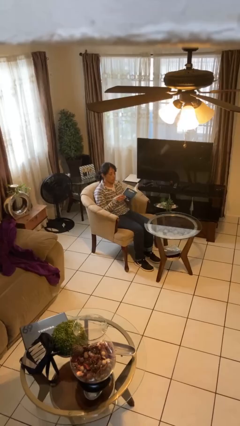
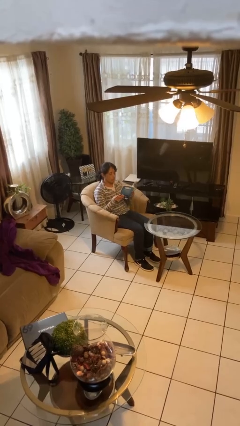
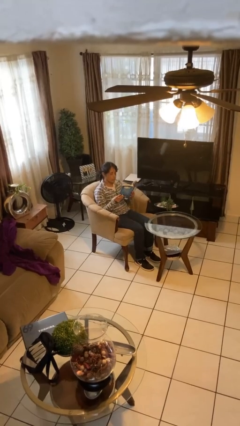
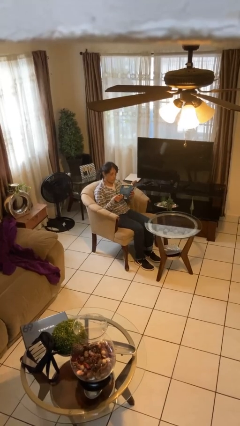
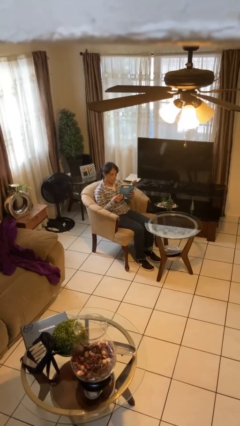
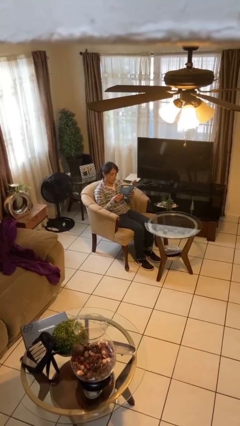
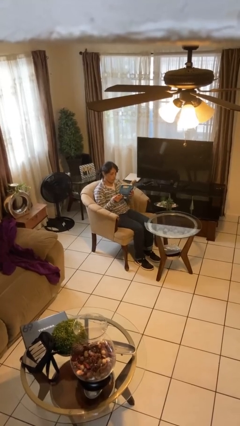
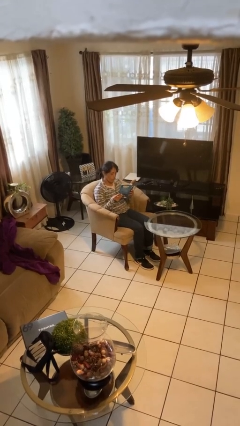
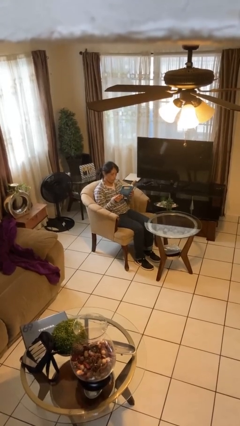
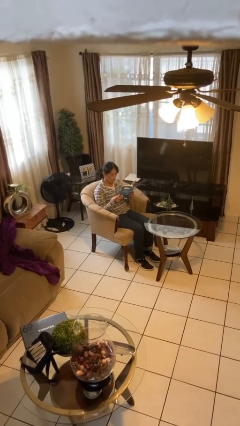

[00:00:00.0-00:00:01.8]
person reads document

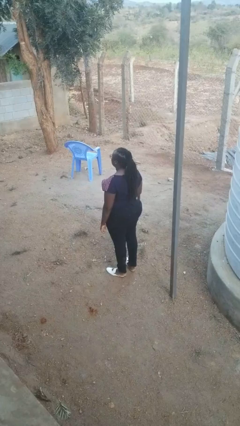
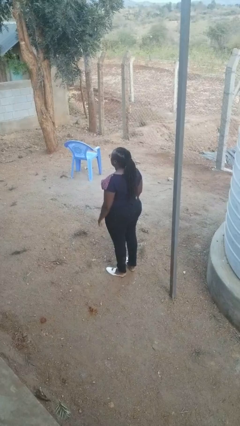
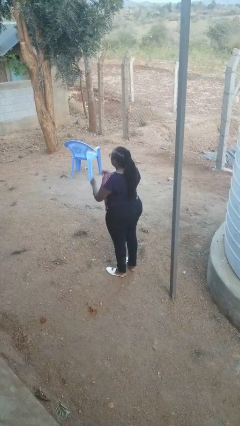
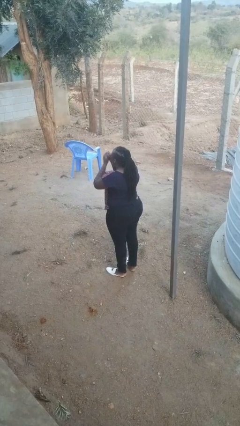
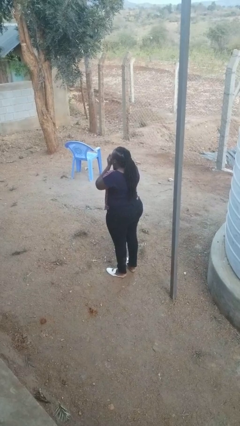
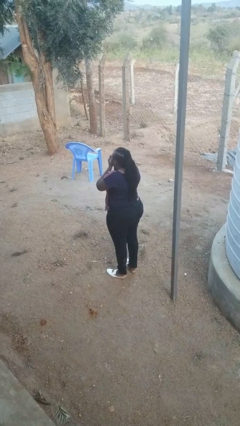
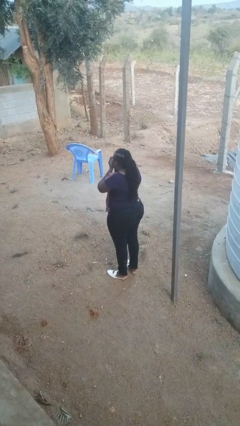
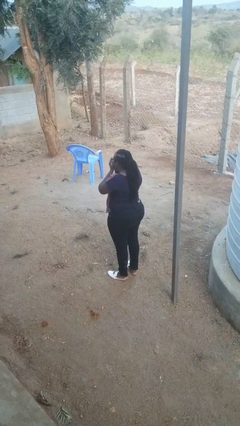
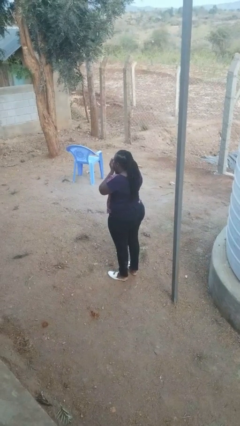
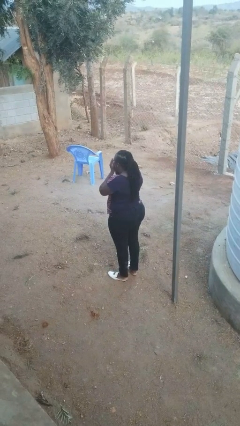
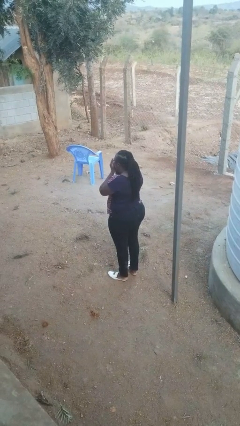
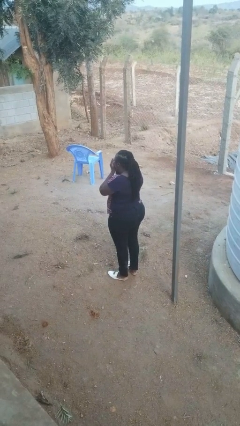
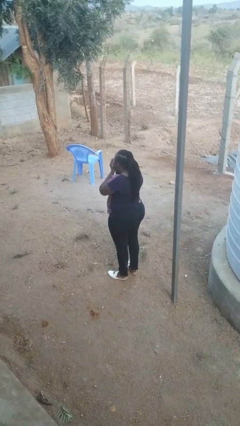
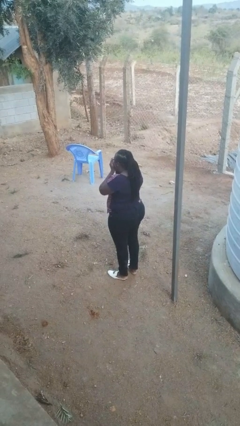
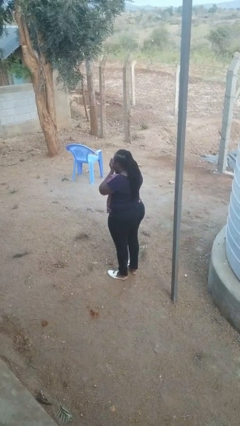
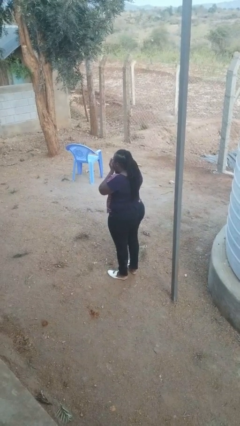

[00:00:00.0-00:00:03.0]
person sneezes into hand

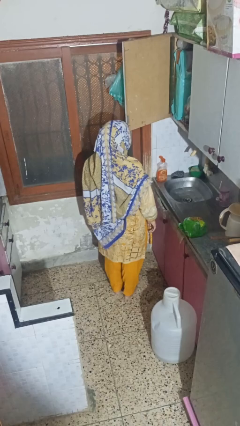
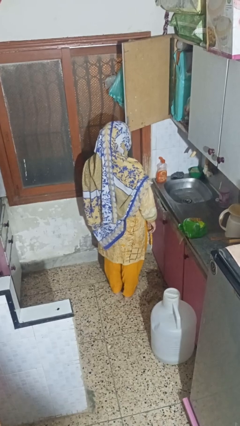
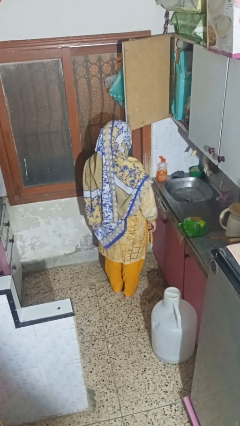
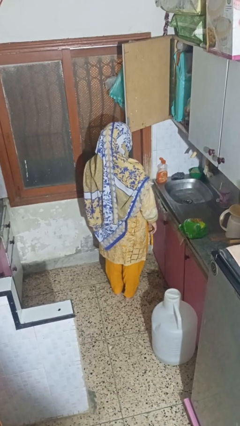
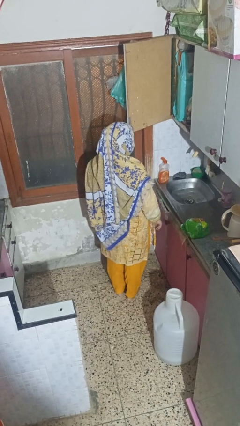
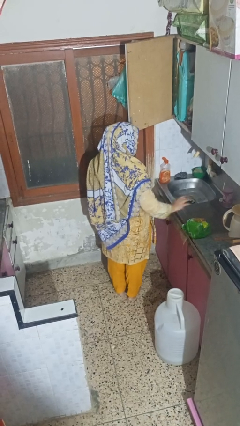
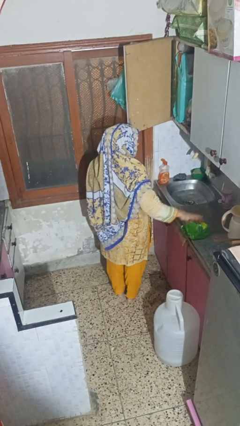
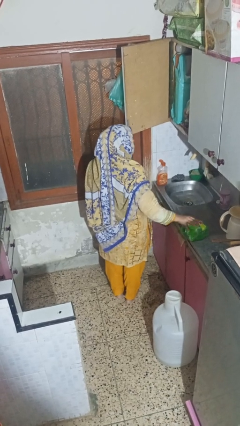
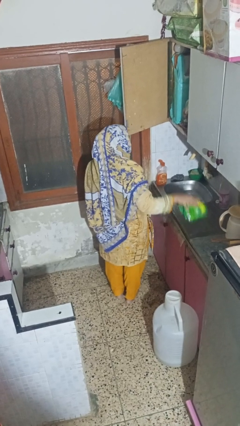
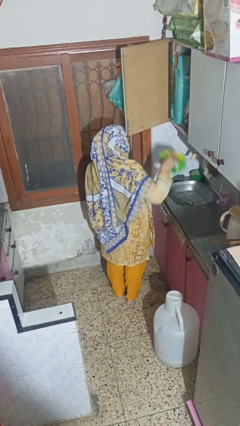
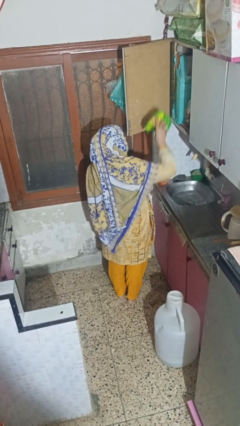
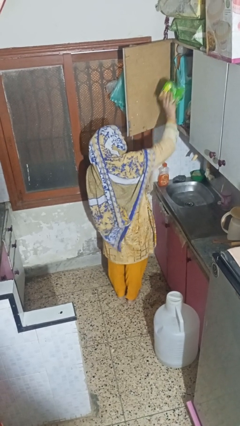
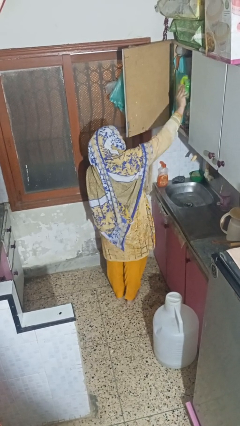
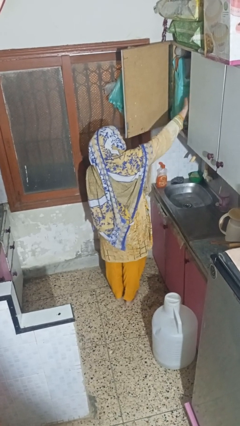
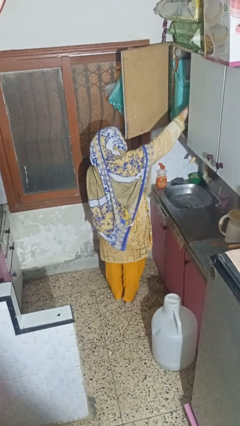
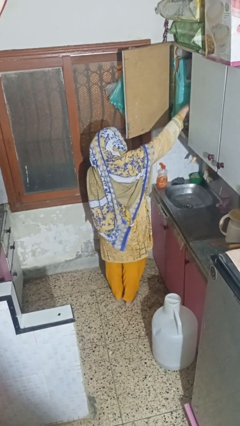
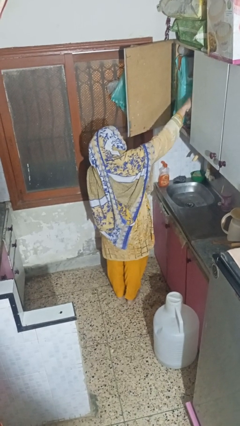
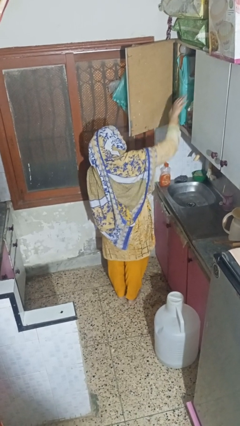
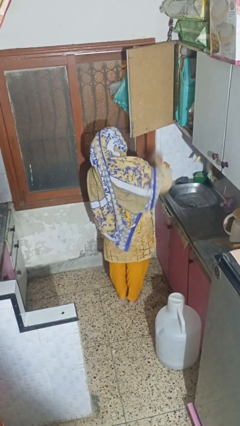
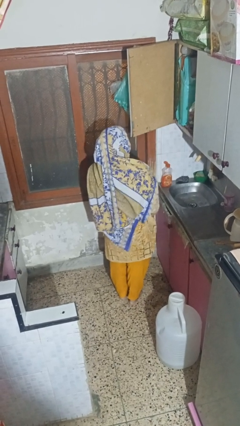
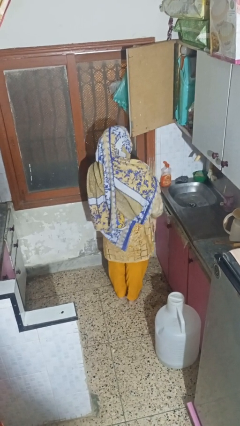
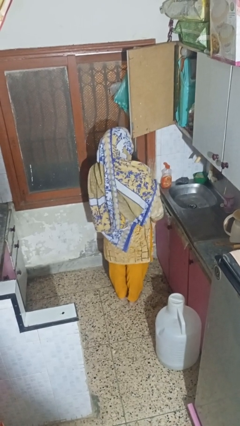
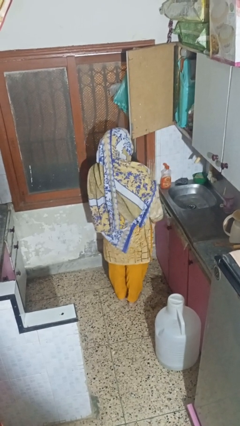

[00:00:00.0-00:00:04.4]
person puts object in cabinet

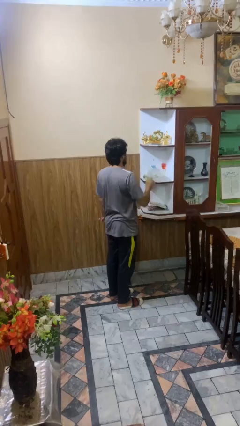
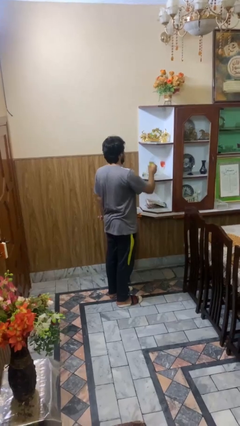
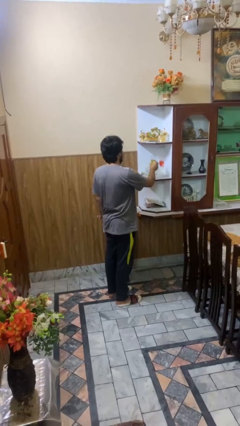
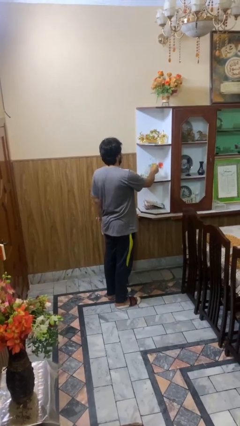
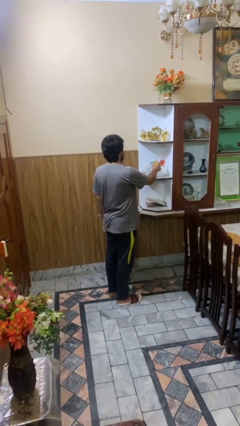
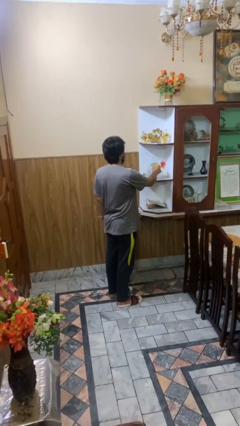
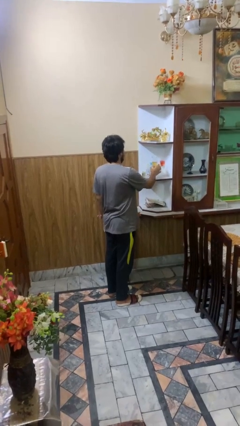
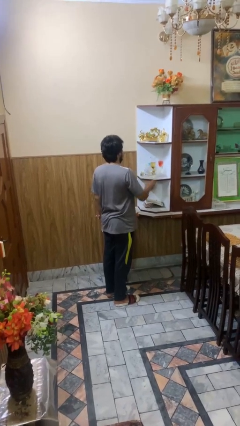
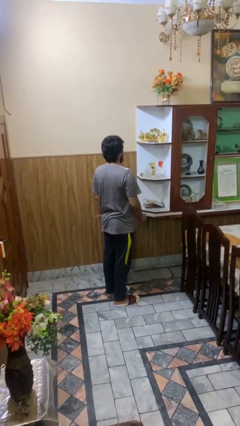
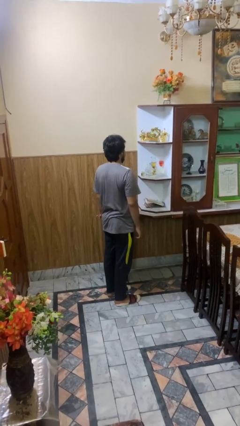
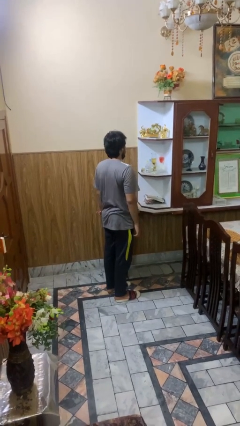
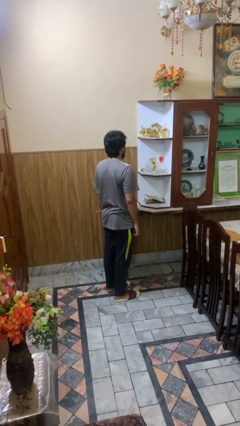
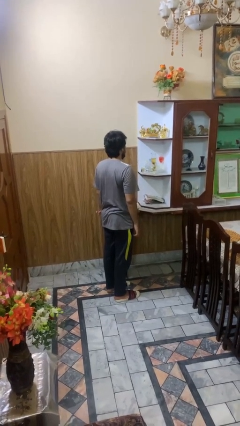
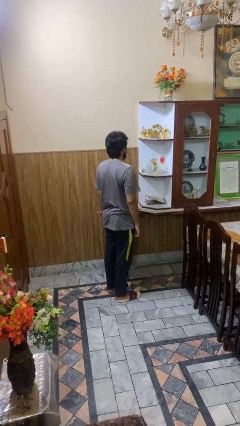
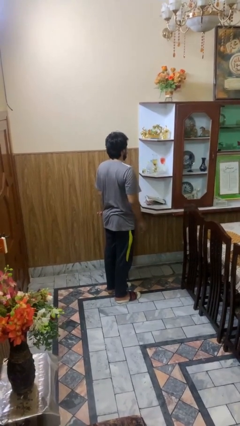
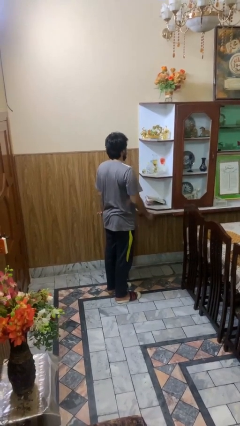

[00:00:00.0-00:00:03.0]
person puts down object into cabinet

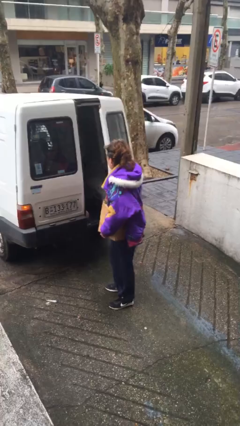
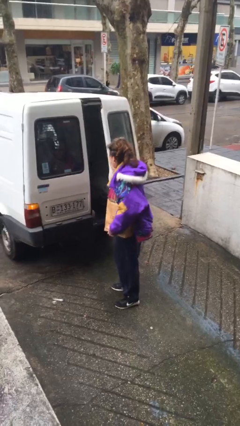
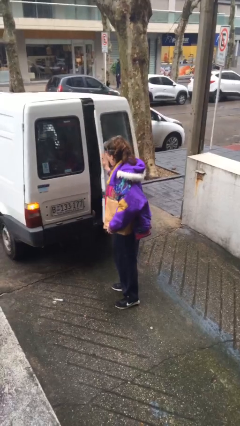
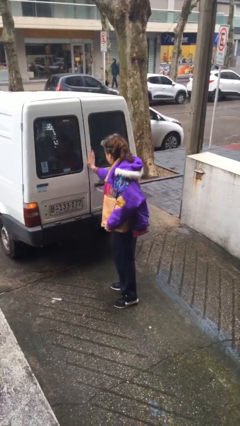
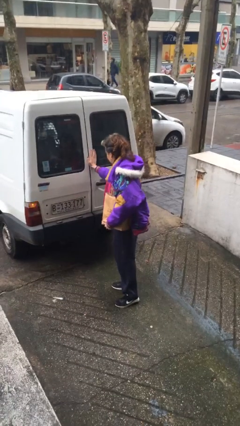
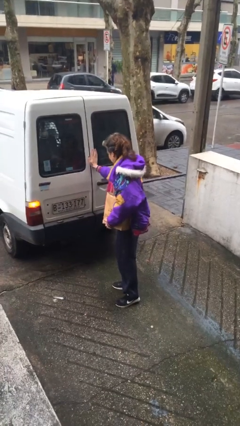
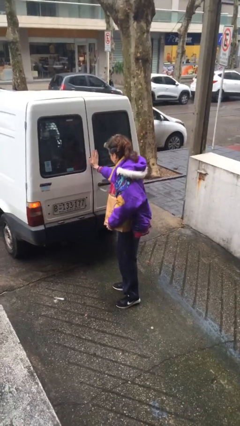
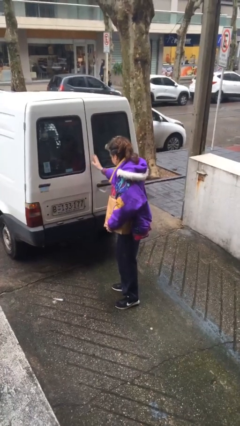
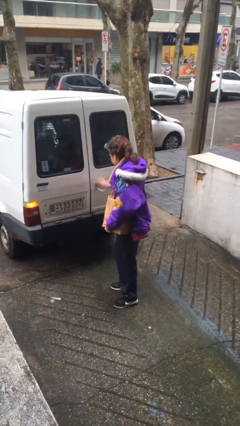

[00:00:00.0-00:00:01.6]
person closes car door

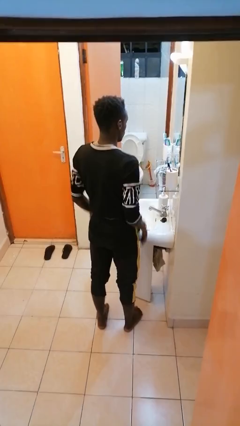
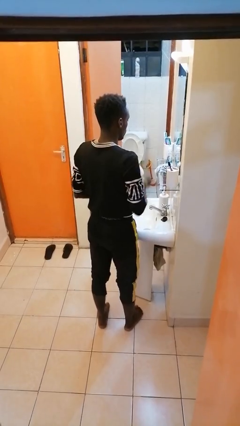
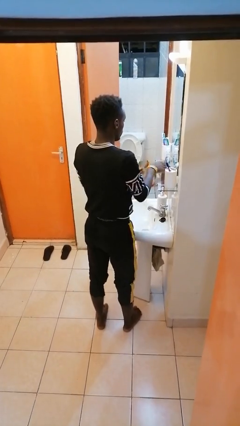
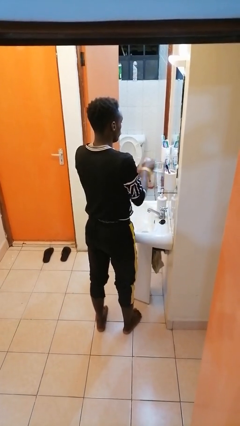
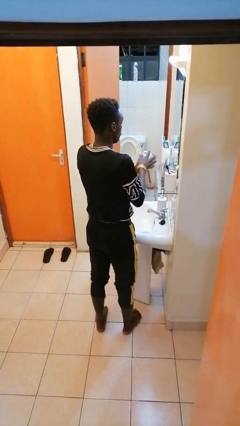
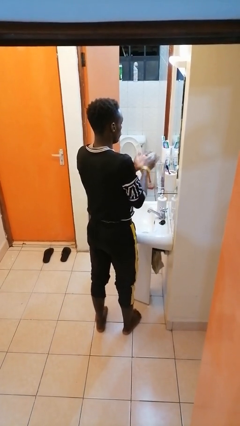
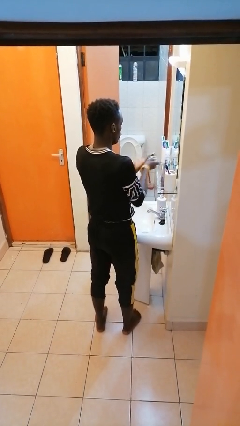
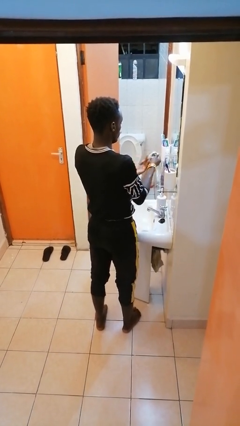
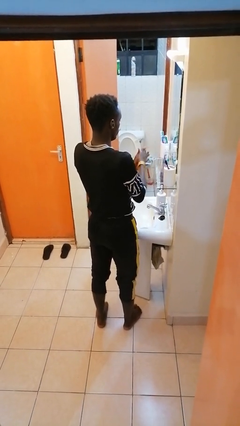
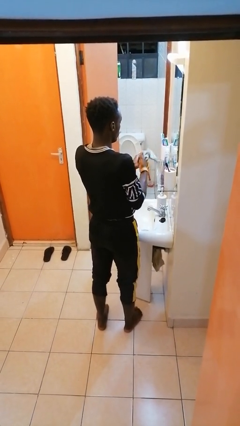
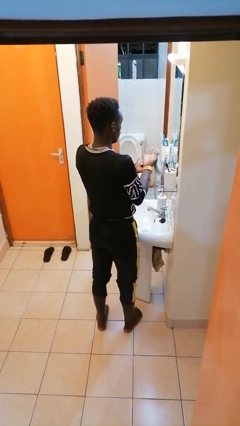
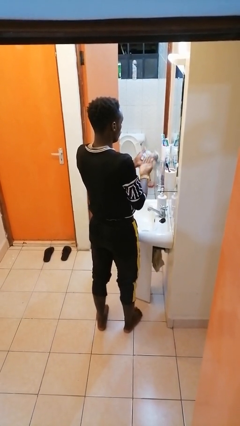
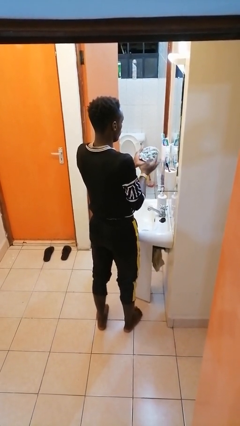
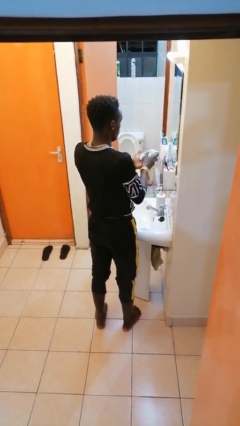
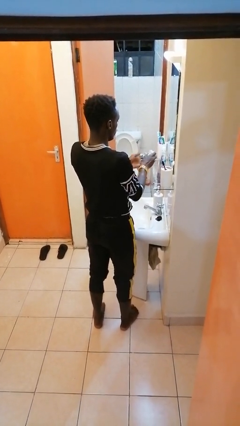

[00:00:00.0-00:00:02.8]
person dries hands with towel

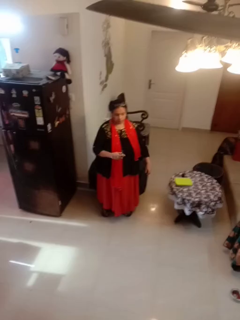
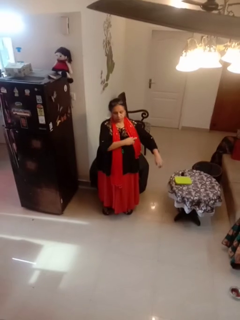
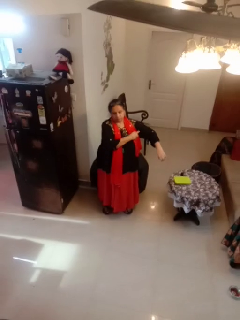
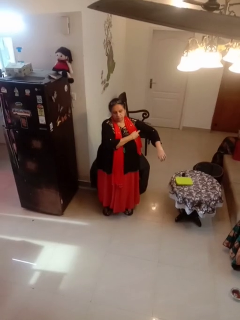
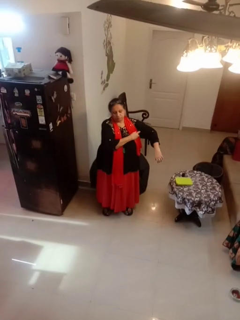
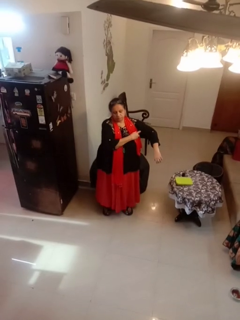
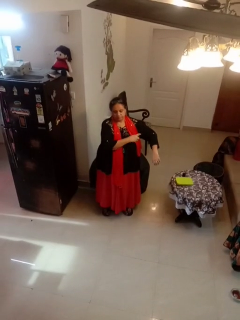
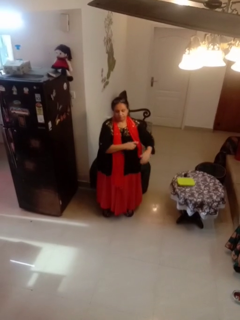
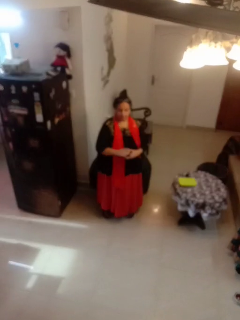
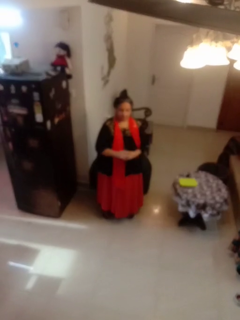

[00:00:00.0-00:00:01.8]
person applies deodorant
